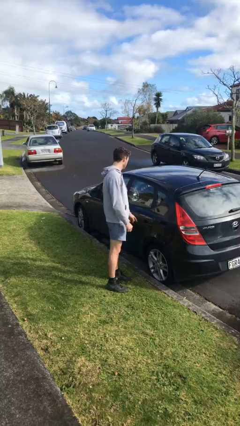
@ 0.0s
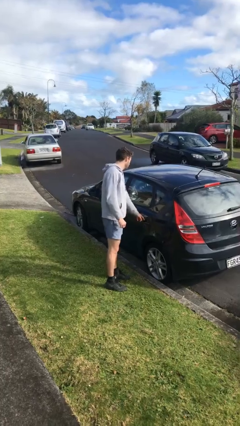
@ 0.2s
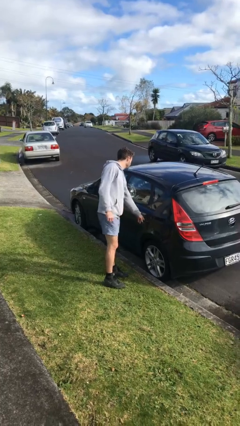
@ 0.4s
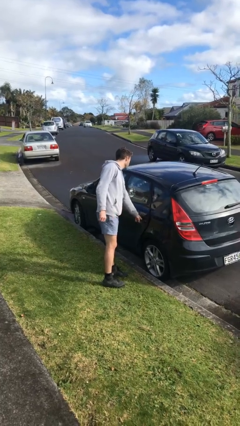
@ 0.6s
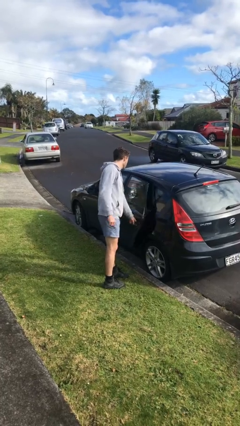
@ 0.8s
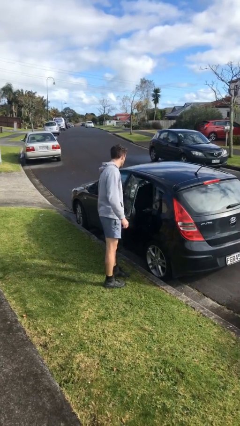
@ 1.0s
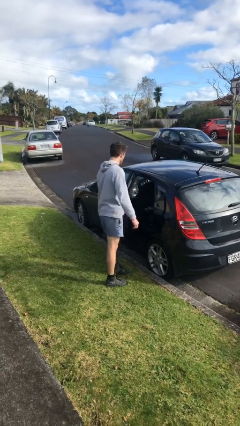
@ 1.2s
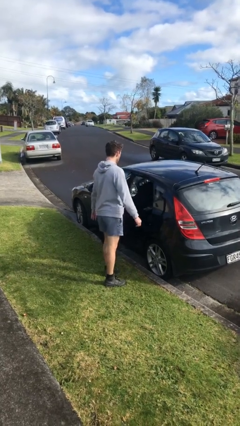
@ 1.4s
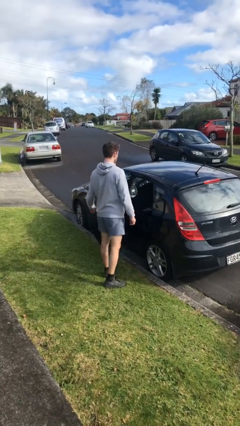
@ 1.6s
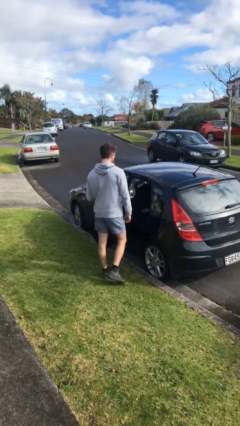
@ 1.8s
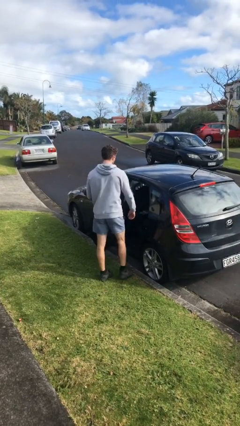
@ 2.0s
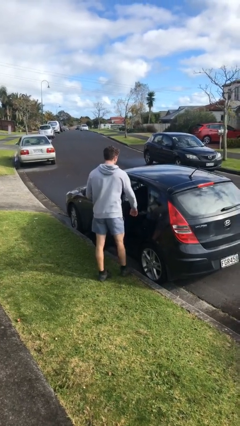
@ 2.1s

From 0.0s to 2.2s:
person opens car door

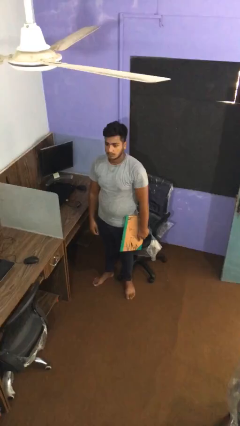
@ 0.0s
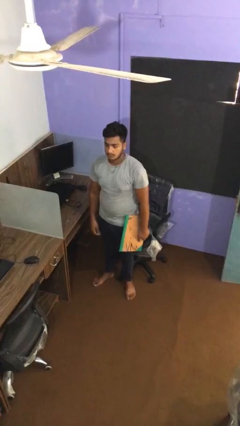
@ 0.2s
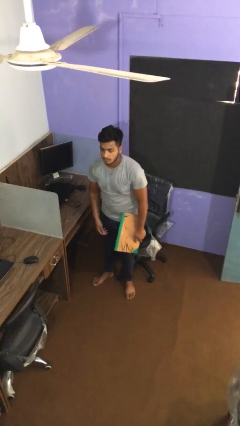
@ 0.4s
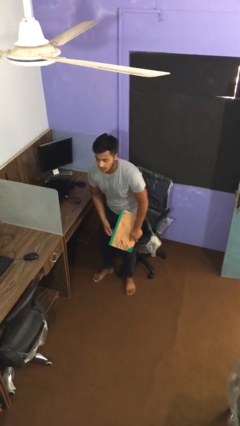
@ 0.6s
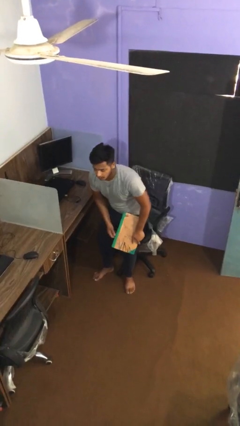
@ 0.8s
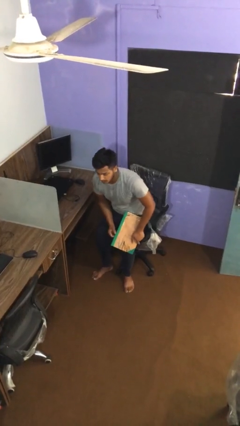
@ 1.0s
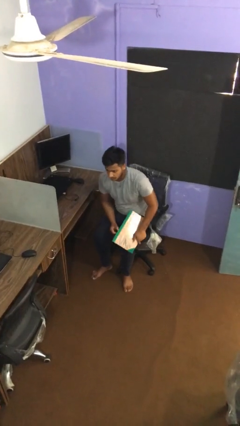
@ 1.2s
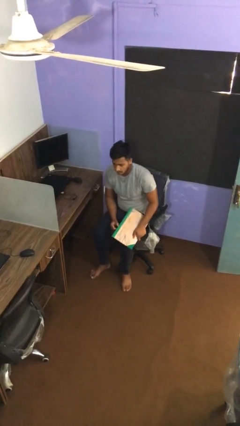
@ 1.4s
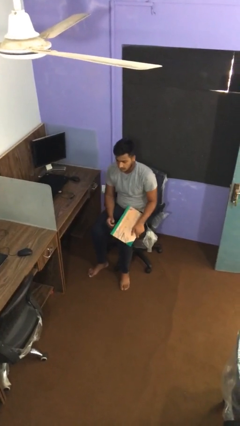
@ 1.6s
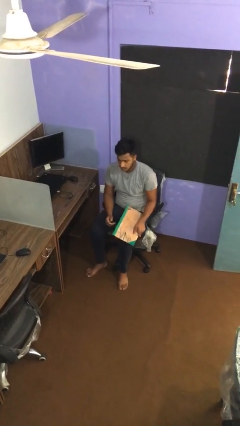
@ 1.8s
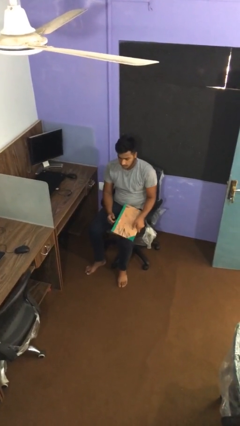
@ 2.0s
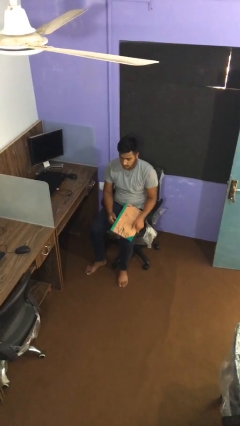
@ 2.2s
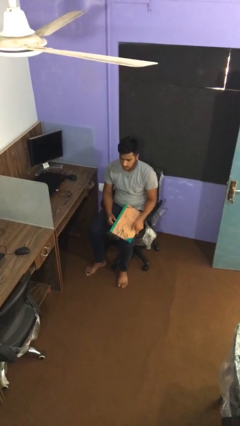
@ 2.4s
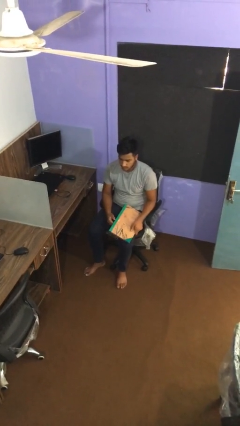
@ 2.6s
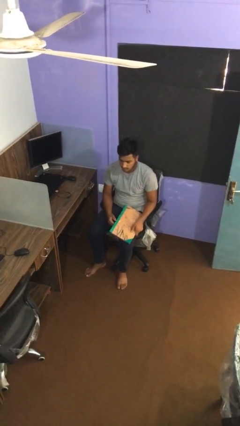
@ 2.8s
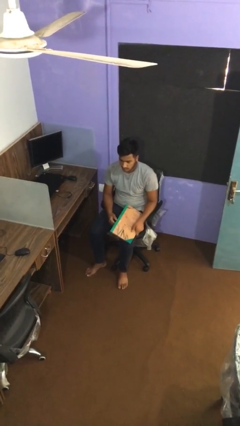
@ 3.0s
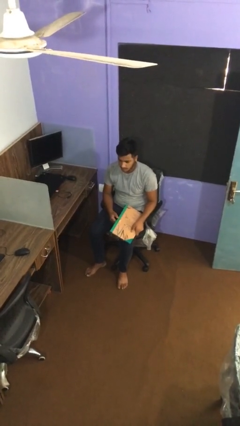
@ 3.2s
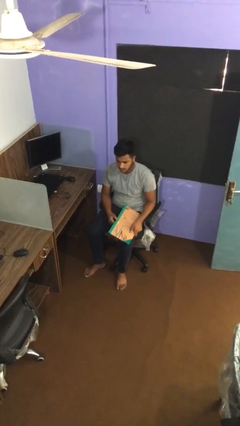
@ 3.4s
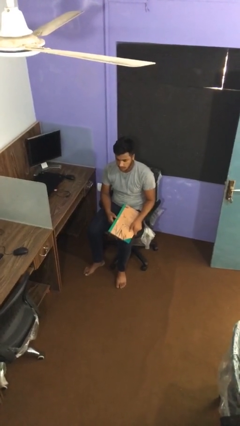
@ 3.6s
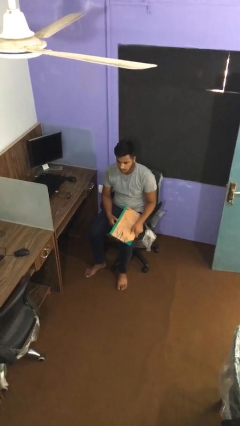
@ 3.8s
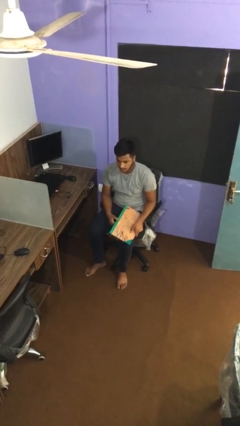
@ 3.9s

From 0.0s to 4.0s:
person sits down

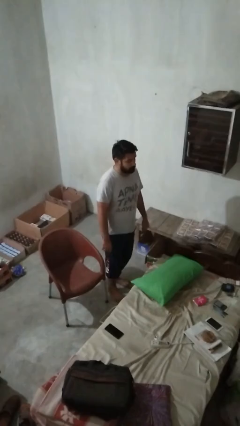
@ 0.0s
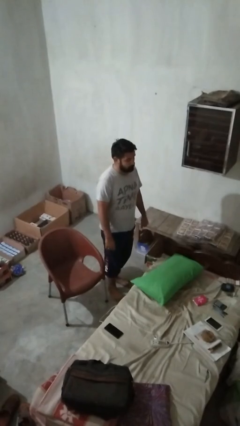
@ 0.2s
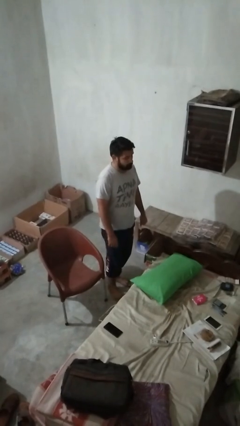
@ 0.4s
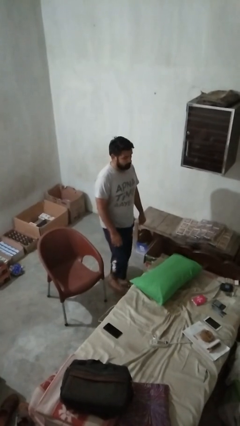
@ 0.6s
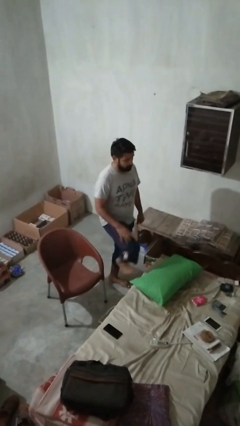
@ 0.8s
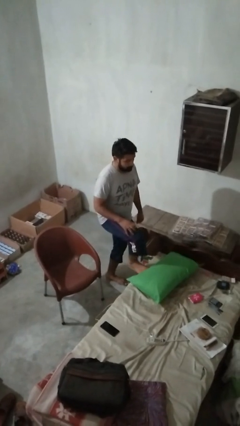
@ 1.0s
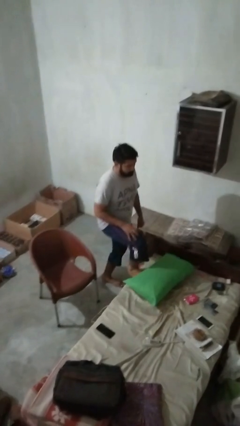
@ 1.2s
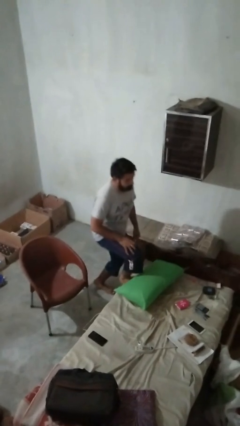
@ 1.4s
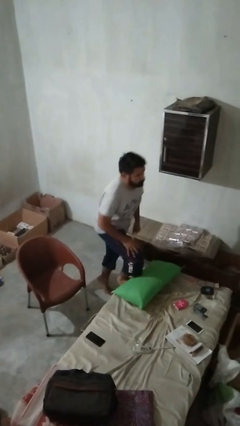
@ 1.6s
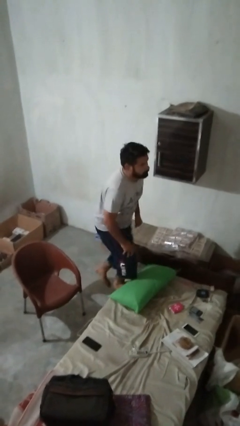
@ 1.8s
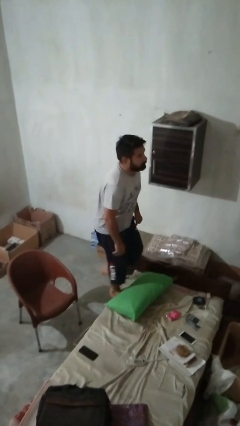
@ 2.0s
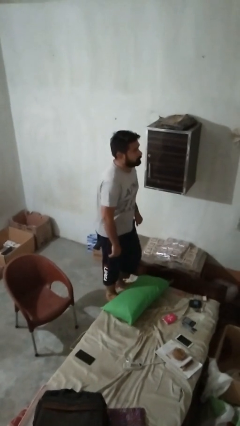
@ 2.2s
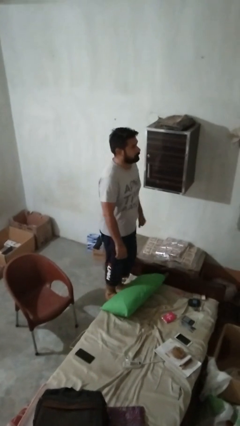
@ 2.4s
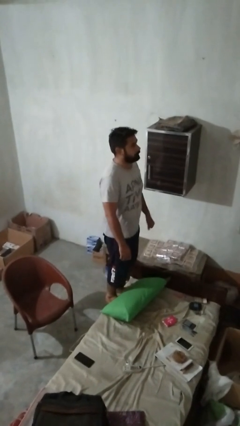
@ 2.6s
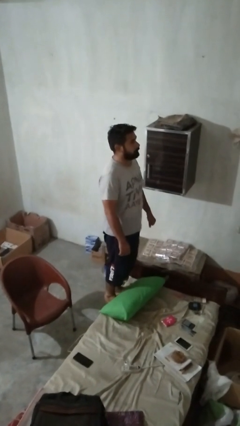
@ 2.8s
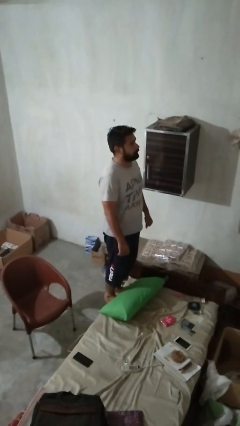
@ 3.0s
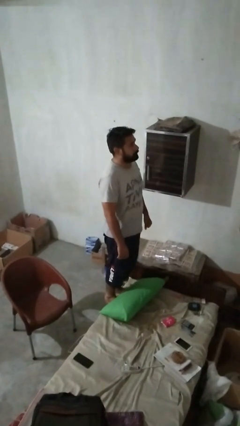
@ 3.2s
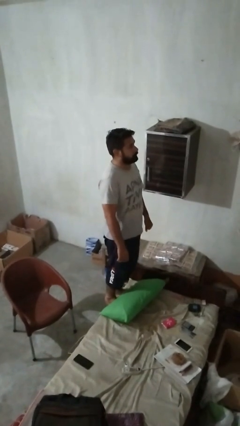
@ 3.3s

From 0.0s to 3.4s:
person climbs on couch

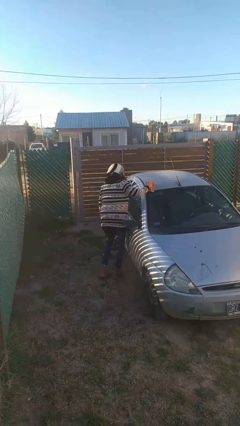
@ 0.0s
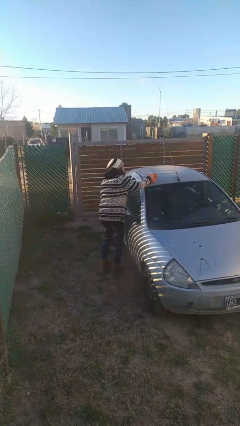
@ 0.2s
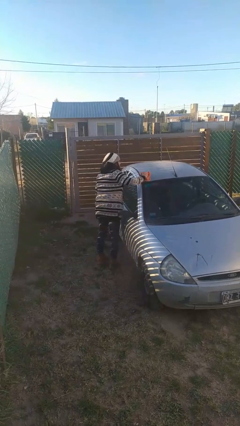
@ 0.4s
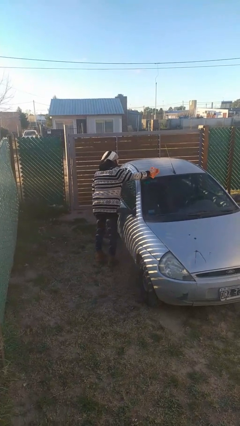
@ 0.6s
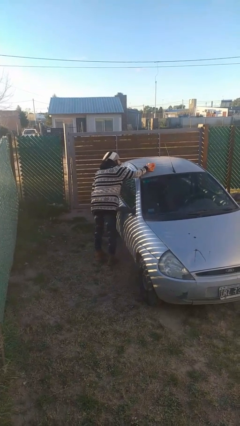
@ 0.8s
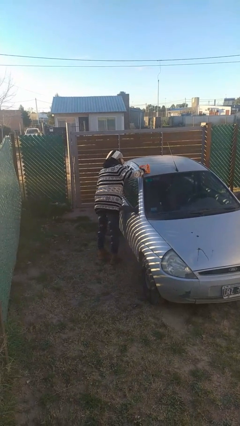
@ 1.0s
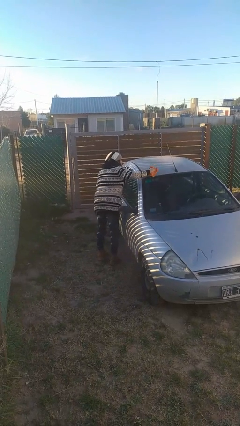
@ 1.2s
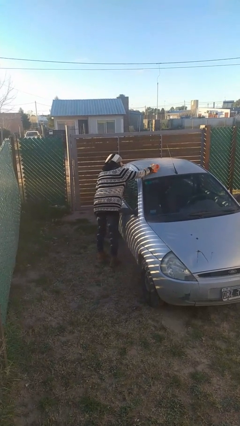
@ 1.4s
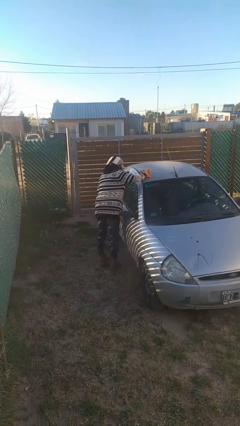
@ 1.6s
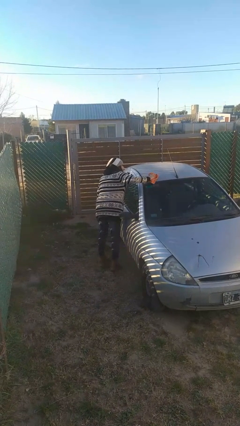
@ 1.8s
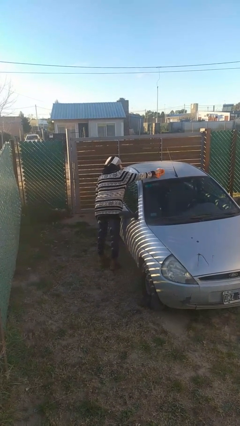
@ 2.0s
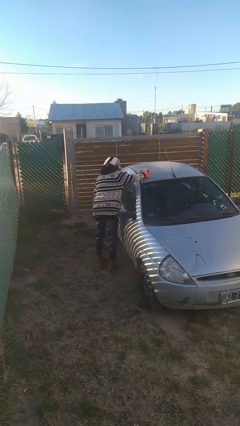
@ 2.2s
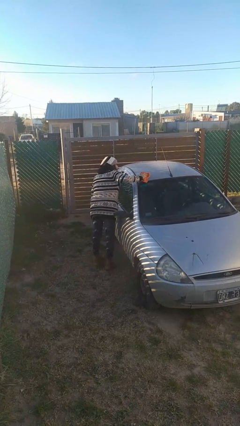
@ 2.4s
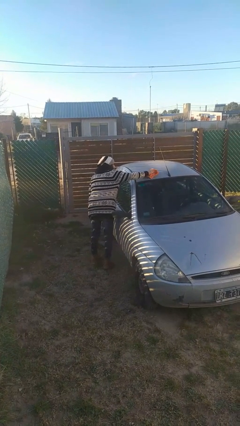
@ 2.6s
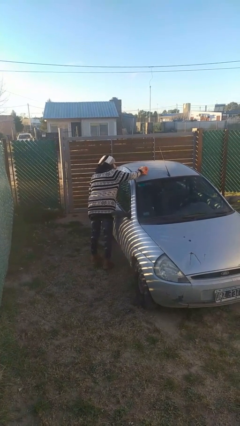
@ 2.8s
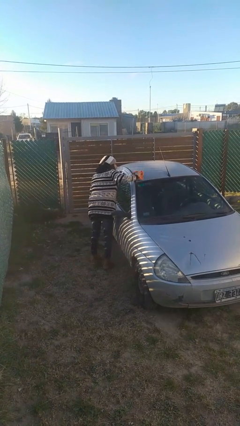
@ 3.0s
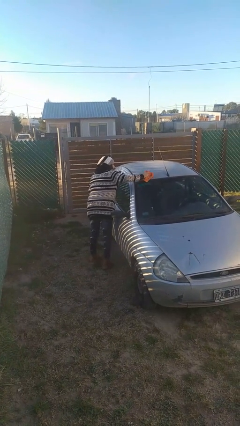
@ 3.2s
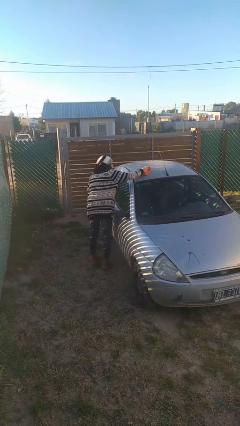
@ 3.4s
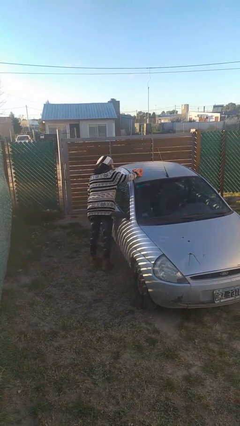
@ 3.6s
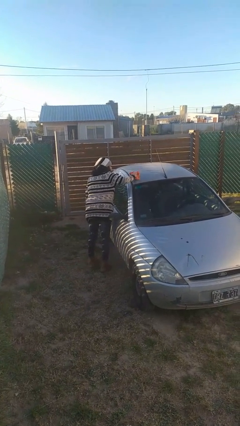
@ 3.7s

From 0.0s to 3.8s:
person polishes car with rag

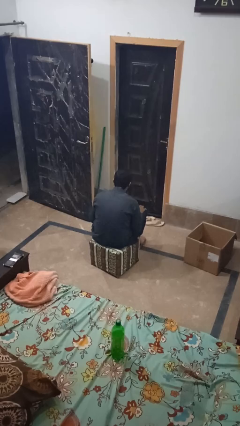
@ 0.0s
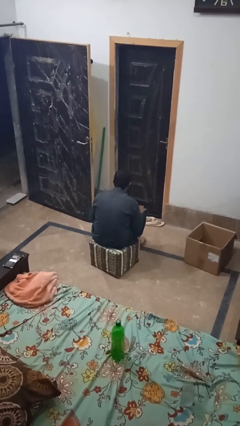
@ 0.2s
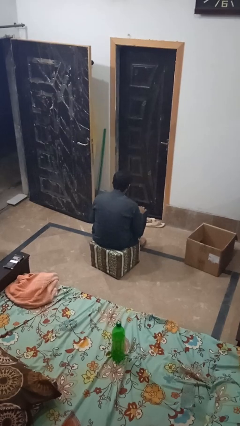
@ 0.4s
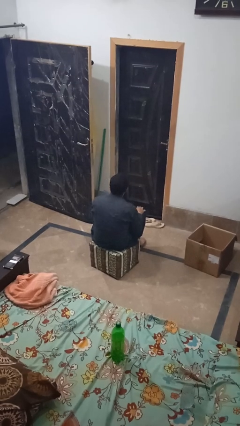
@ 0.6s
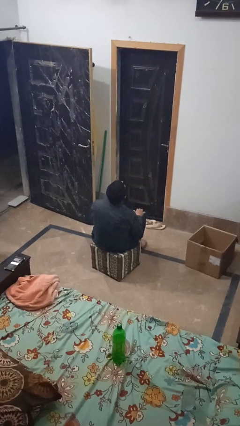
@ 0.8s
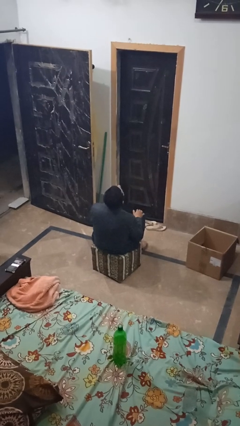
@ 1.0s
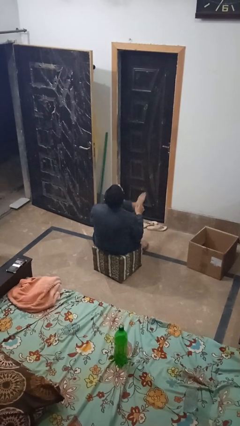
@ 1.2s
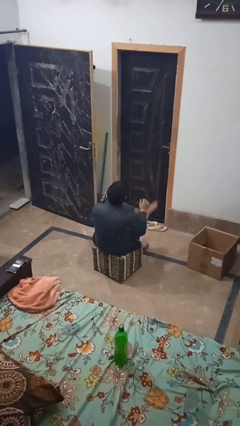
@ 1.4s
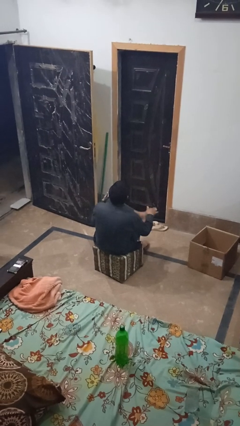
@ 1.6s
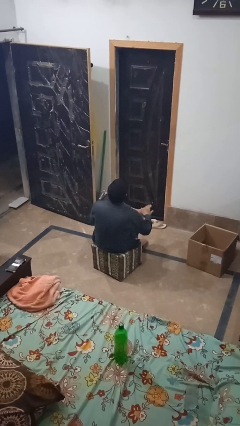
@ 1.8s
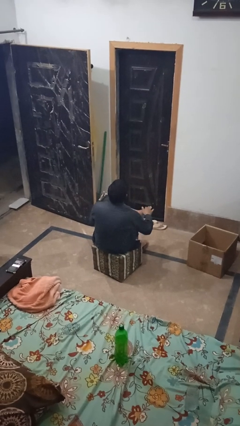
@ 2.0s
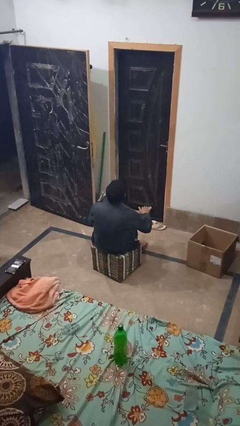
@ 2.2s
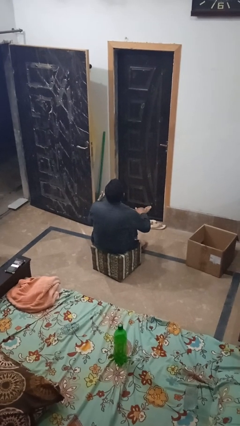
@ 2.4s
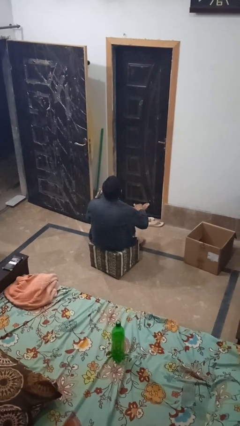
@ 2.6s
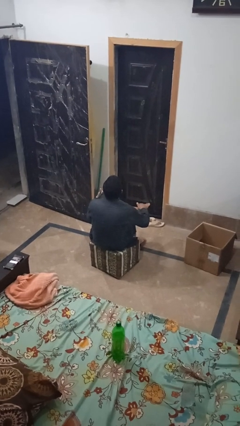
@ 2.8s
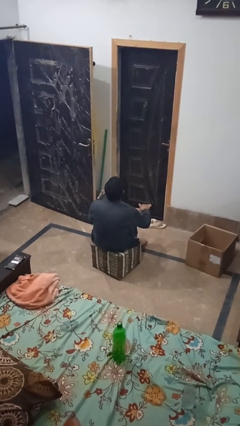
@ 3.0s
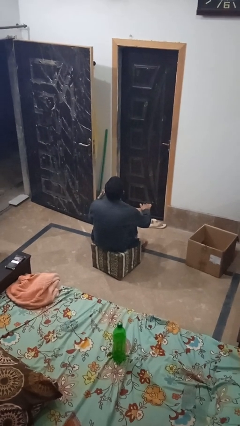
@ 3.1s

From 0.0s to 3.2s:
person rubs foot

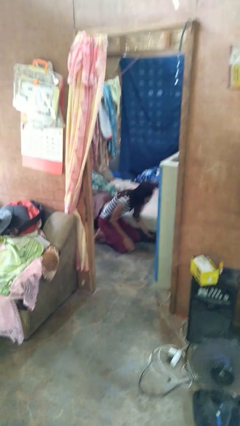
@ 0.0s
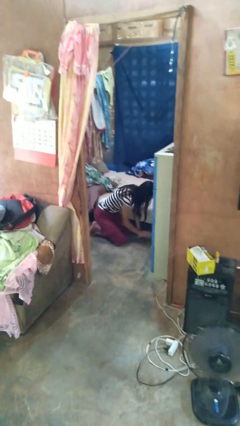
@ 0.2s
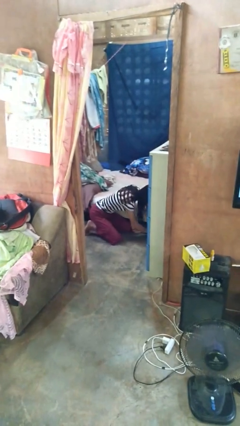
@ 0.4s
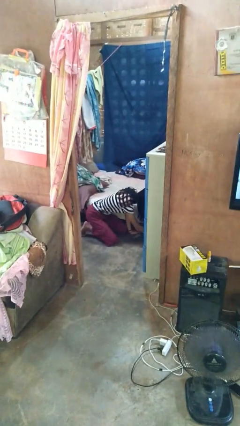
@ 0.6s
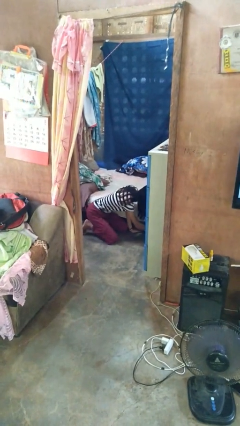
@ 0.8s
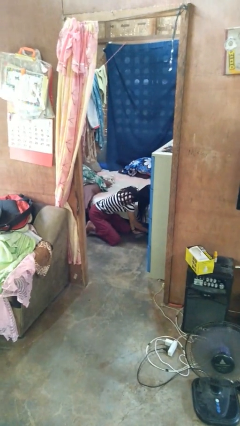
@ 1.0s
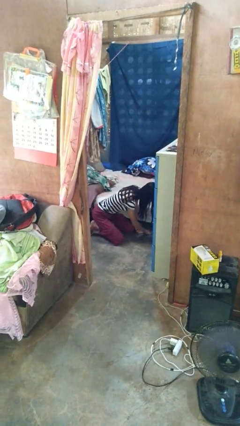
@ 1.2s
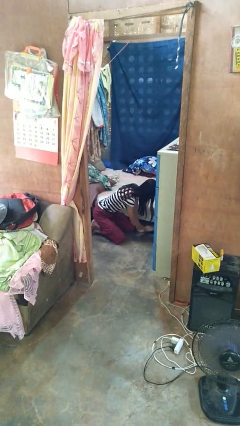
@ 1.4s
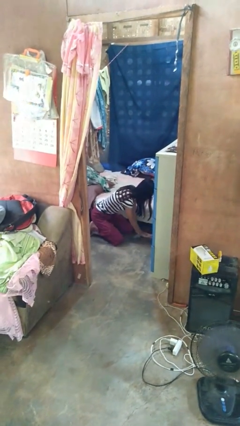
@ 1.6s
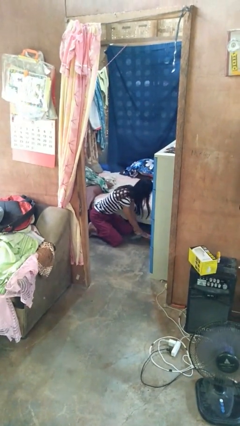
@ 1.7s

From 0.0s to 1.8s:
person searches under bed
